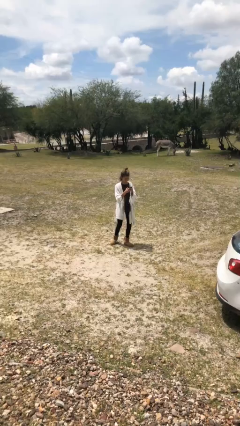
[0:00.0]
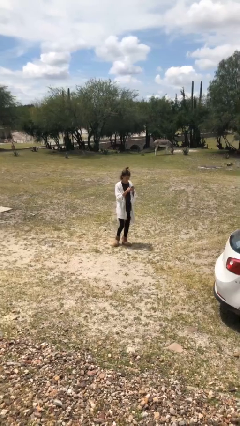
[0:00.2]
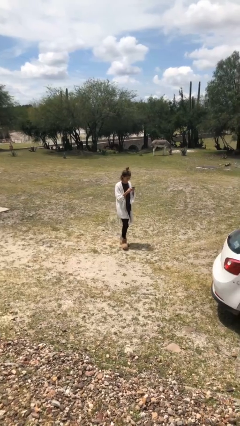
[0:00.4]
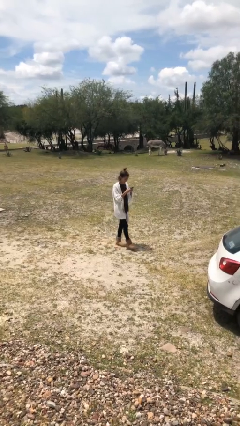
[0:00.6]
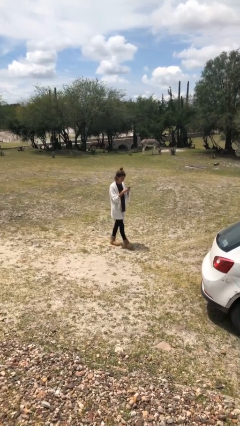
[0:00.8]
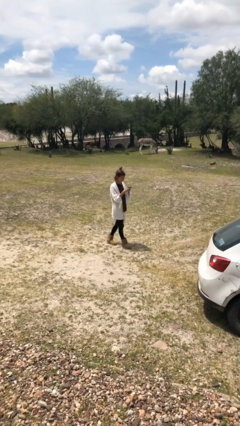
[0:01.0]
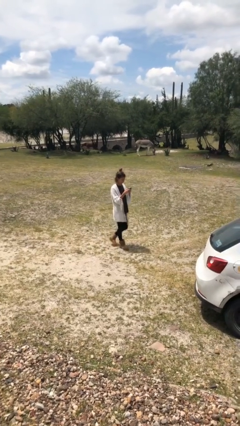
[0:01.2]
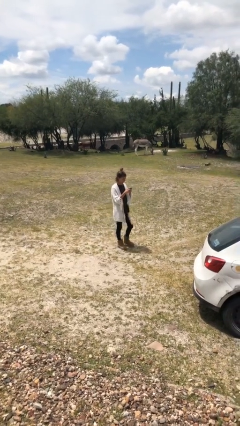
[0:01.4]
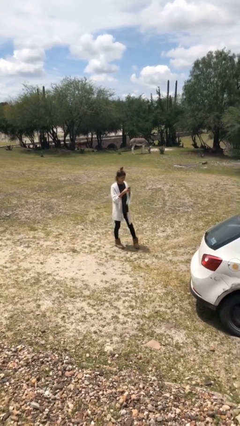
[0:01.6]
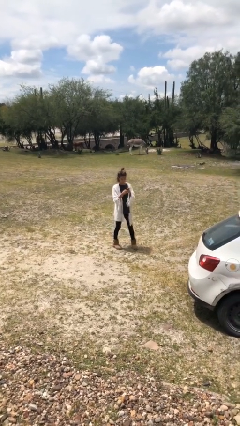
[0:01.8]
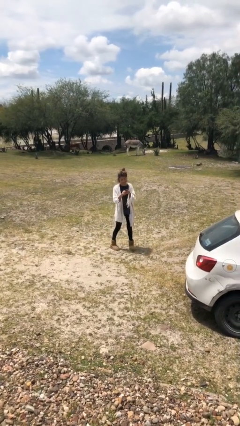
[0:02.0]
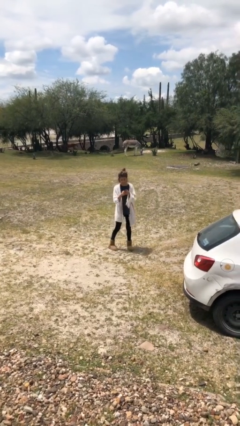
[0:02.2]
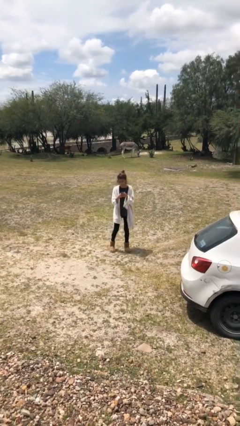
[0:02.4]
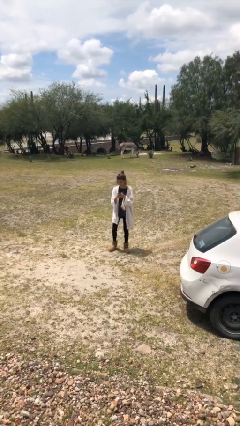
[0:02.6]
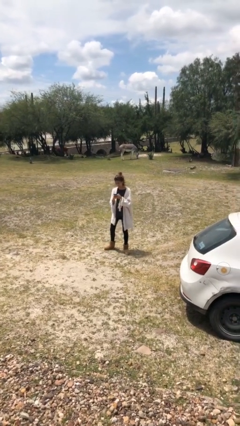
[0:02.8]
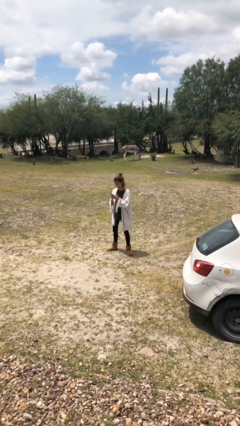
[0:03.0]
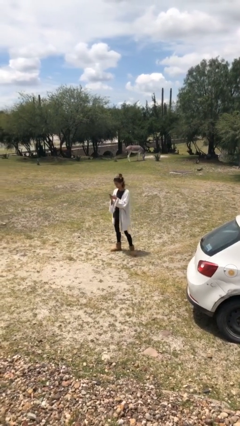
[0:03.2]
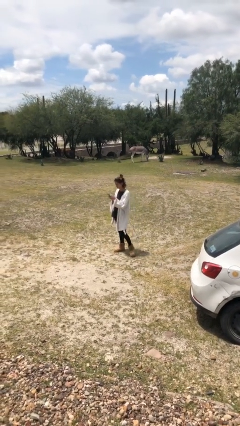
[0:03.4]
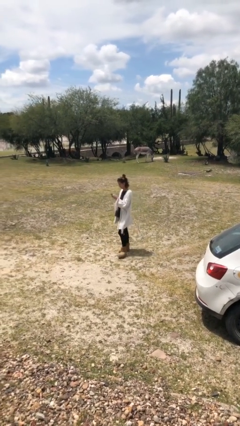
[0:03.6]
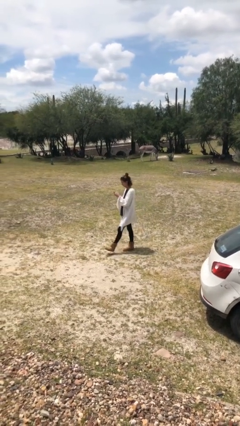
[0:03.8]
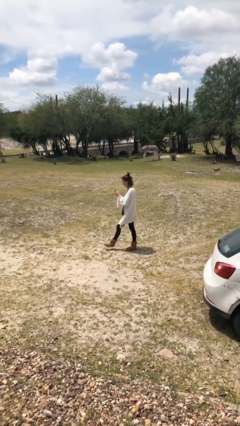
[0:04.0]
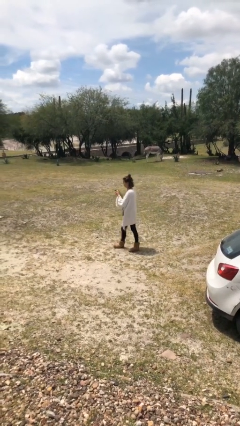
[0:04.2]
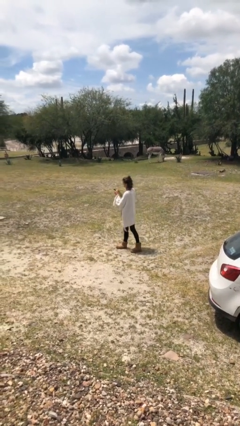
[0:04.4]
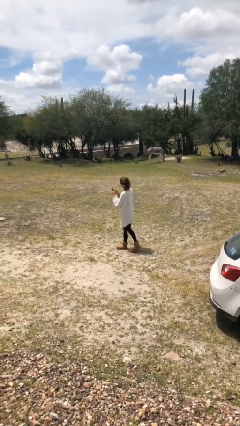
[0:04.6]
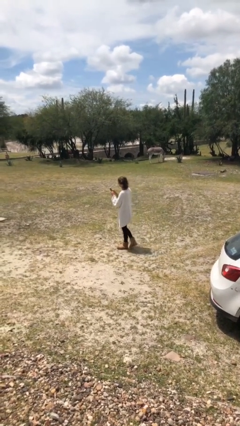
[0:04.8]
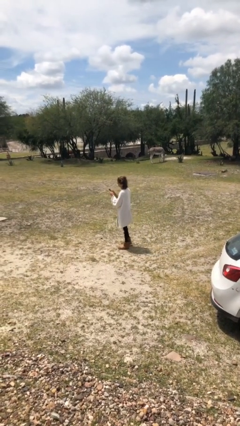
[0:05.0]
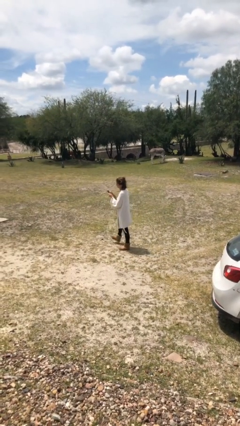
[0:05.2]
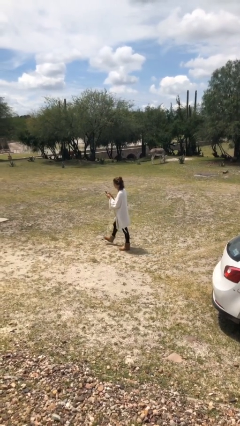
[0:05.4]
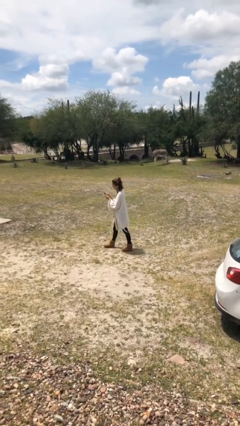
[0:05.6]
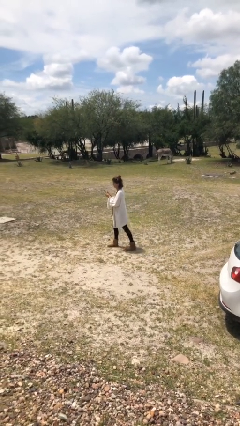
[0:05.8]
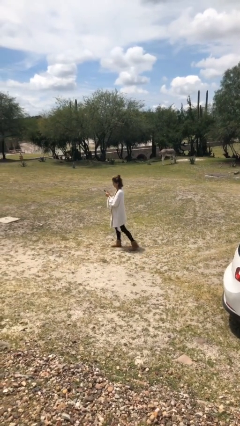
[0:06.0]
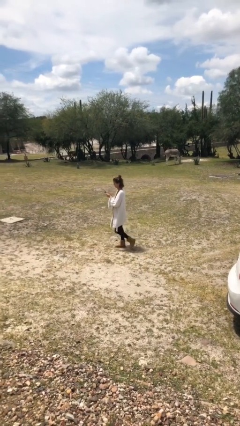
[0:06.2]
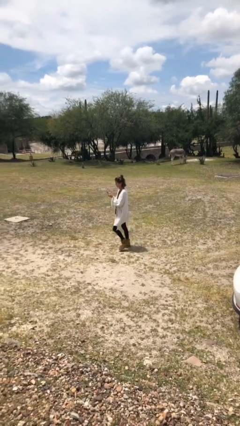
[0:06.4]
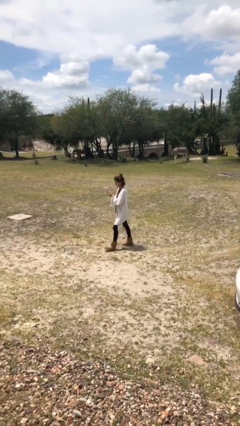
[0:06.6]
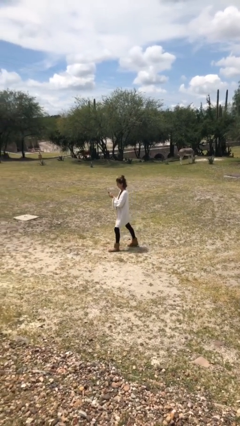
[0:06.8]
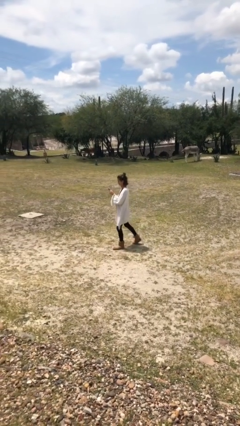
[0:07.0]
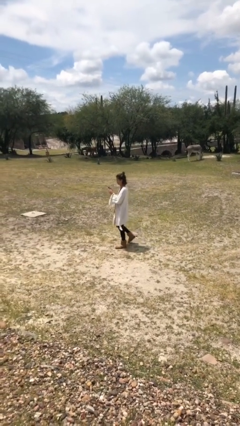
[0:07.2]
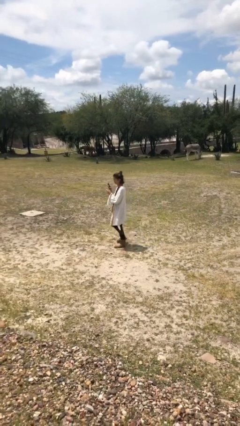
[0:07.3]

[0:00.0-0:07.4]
person texts on phone

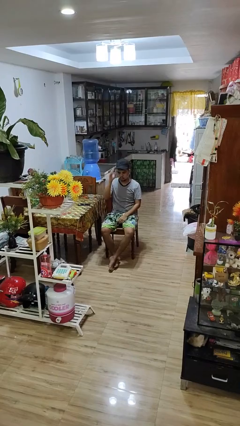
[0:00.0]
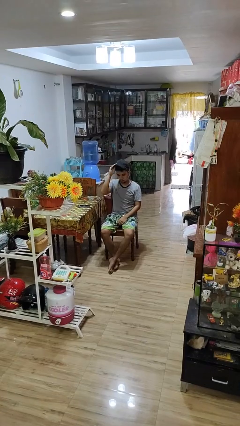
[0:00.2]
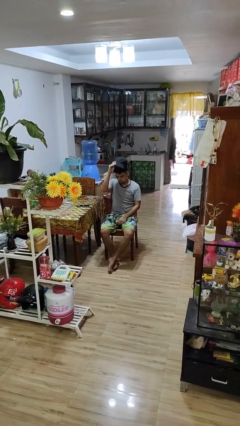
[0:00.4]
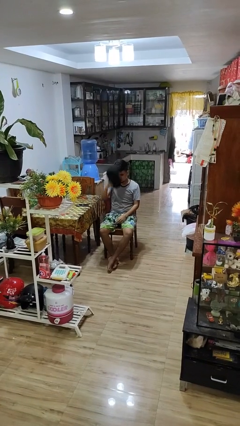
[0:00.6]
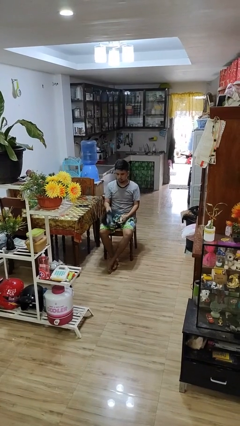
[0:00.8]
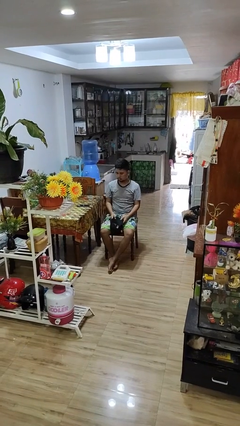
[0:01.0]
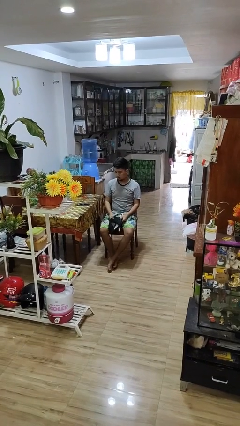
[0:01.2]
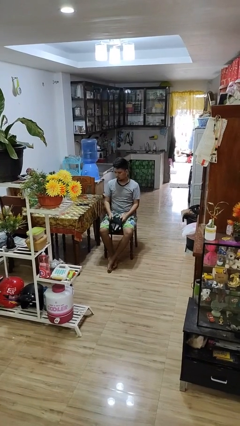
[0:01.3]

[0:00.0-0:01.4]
person takes off hat

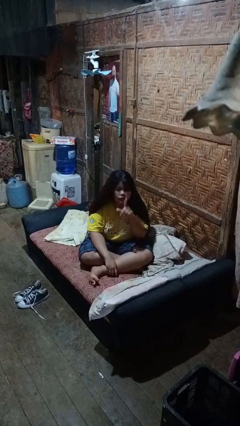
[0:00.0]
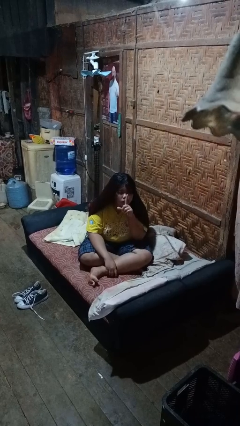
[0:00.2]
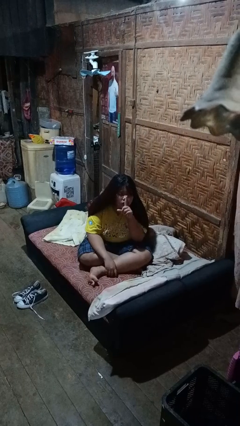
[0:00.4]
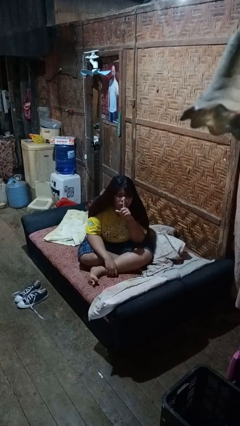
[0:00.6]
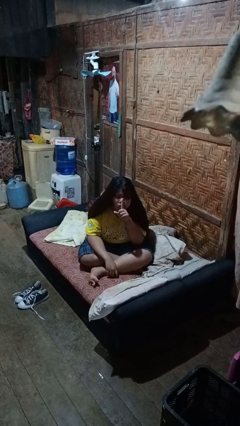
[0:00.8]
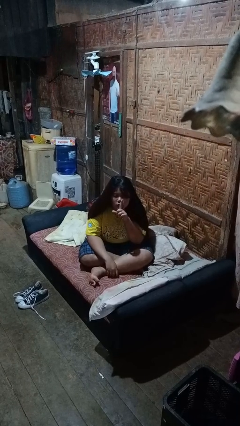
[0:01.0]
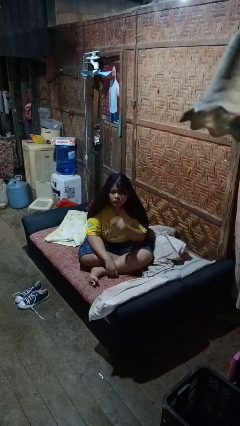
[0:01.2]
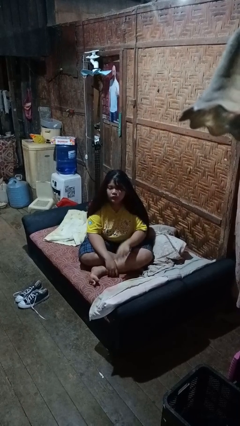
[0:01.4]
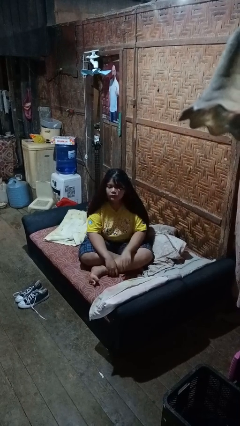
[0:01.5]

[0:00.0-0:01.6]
person gestures be quiet

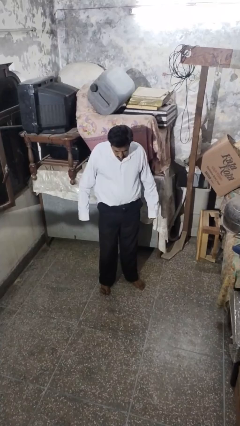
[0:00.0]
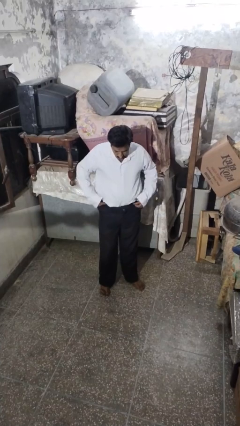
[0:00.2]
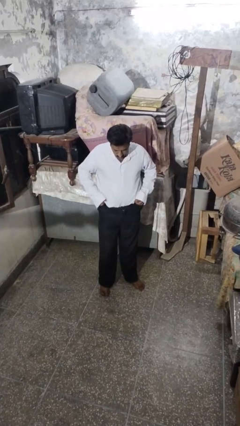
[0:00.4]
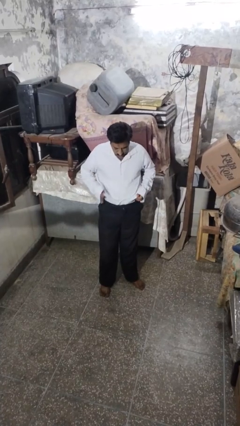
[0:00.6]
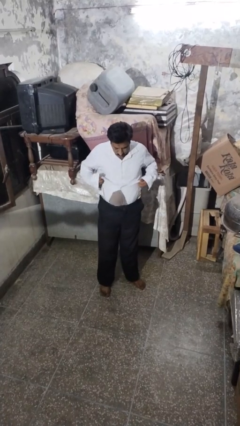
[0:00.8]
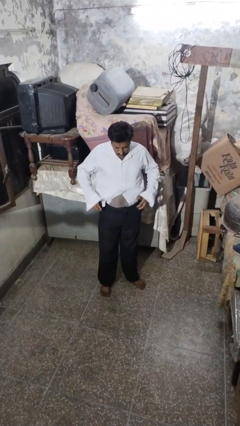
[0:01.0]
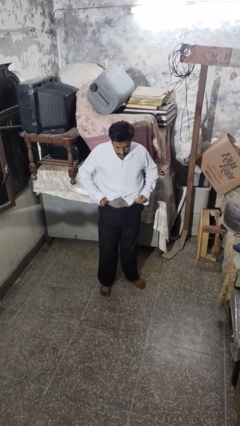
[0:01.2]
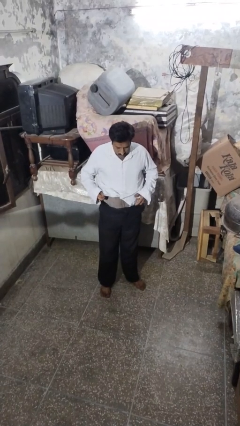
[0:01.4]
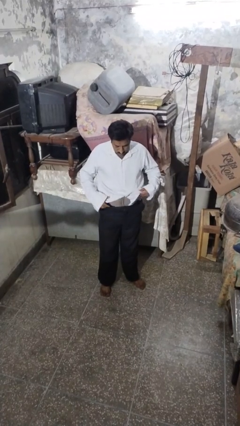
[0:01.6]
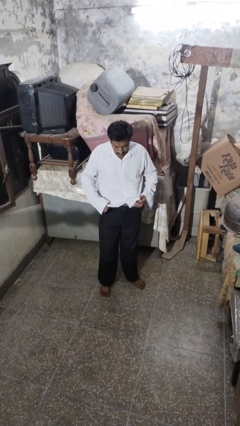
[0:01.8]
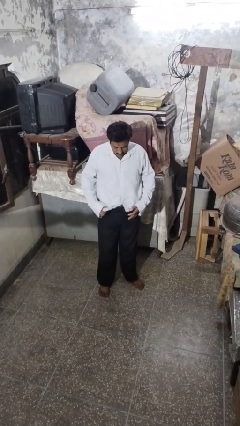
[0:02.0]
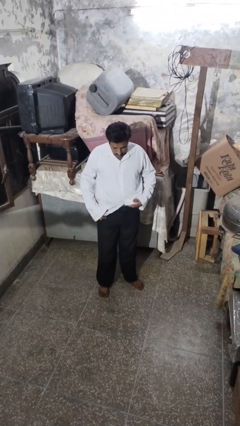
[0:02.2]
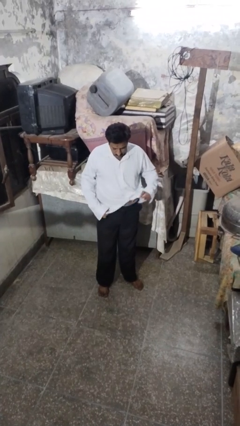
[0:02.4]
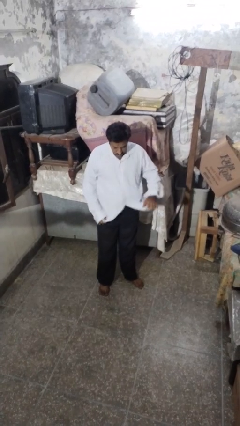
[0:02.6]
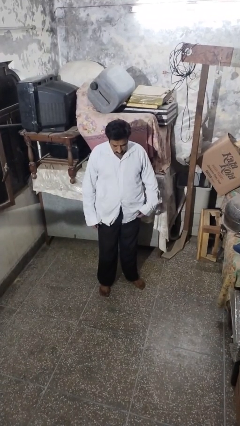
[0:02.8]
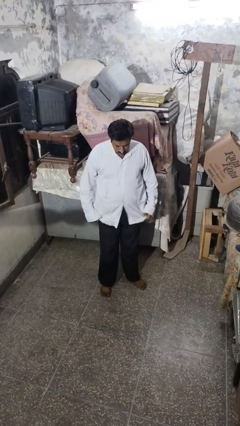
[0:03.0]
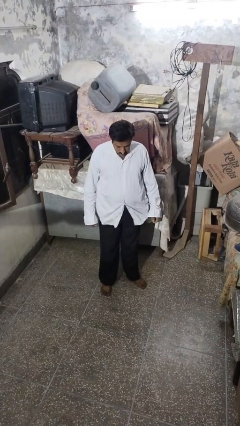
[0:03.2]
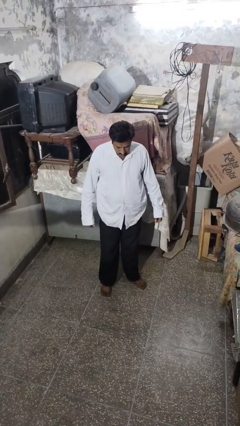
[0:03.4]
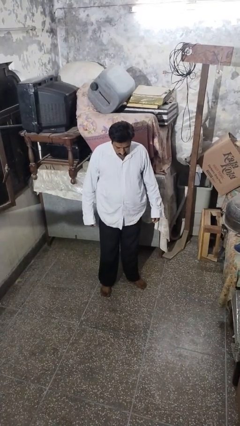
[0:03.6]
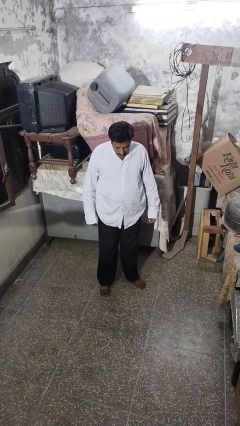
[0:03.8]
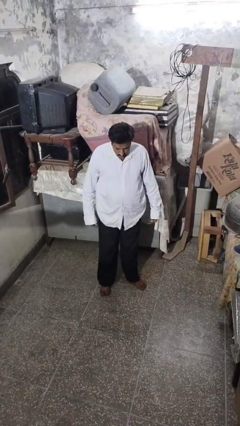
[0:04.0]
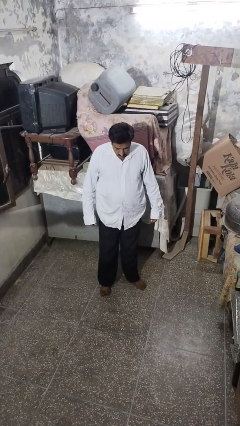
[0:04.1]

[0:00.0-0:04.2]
person untucks shirt

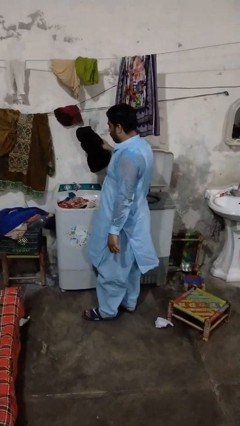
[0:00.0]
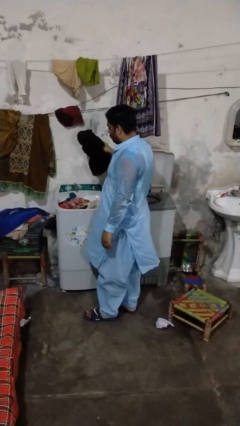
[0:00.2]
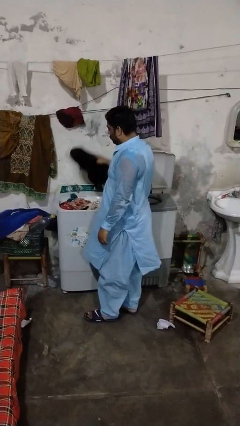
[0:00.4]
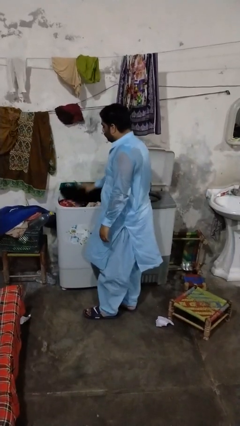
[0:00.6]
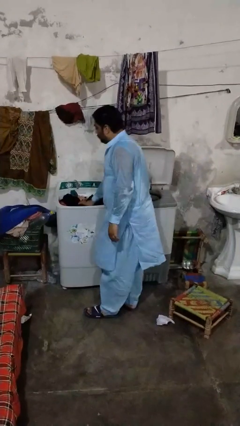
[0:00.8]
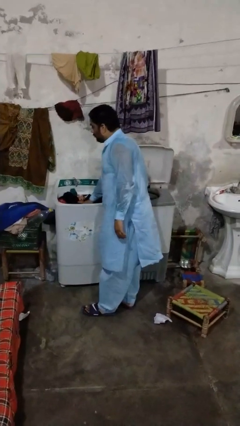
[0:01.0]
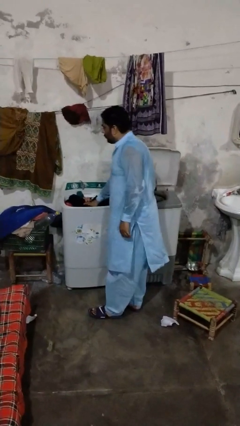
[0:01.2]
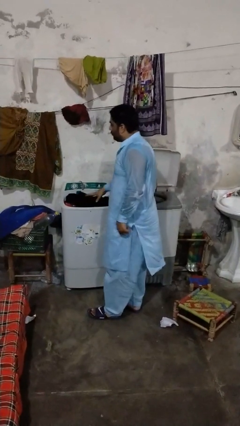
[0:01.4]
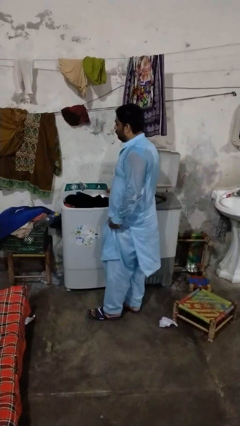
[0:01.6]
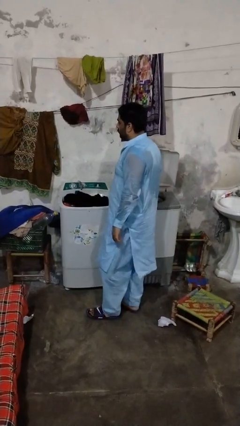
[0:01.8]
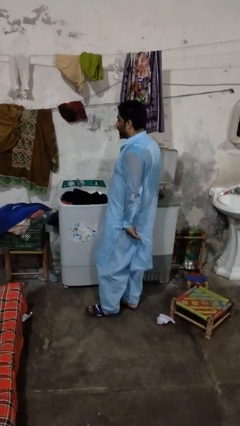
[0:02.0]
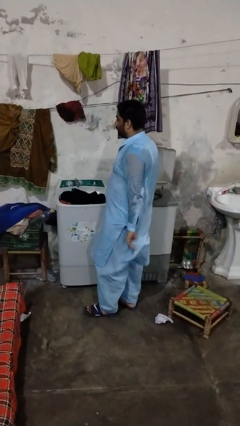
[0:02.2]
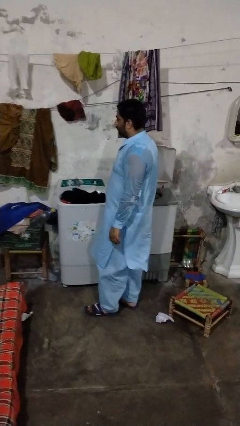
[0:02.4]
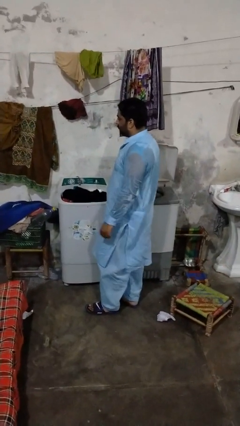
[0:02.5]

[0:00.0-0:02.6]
person loads clotheswasher

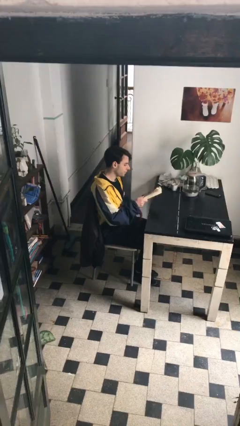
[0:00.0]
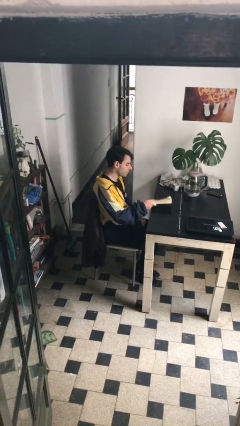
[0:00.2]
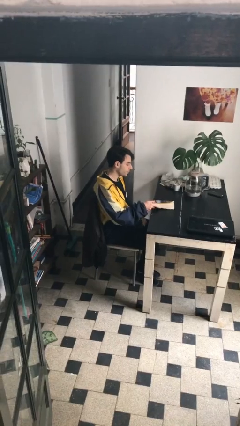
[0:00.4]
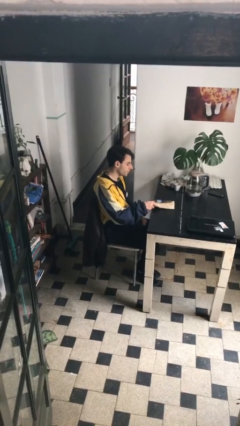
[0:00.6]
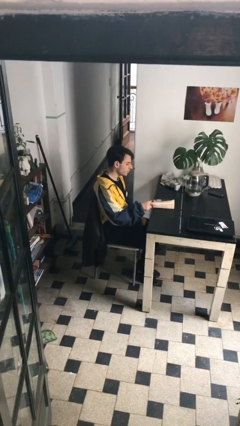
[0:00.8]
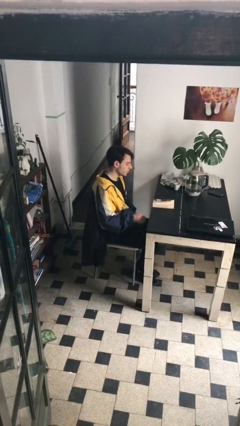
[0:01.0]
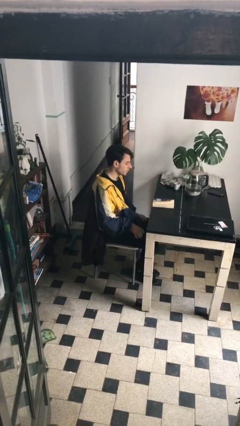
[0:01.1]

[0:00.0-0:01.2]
person puts down object on table
